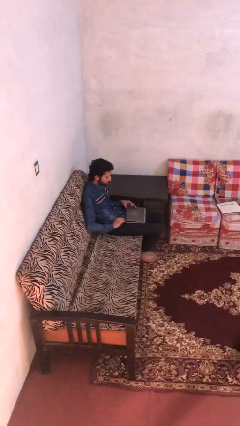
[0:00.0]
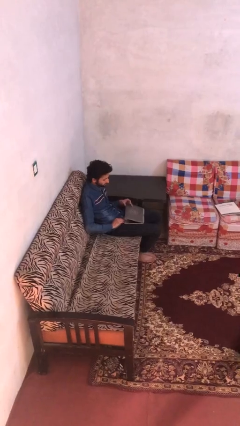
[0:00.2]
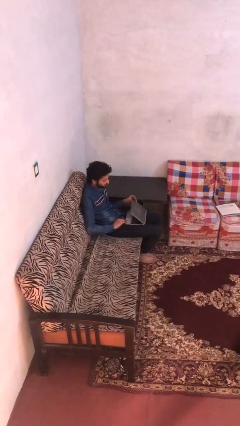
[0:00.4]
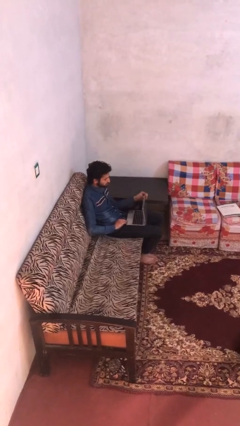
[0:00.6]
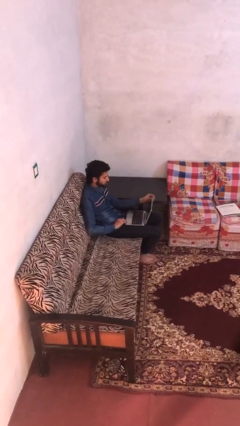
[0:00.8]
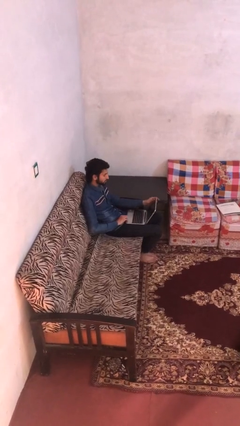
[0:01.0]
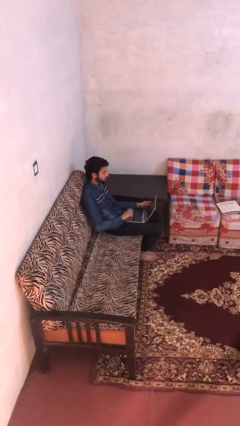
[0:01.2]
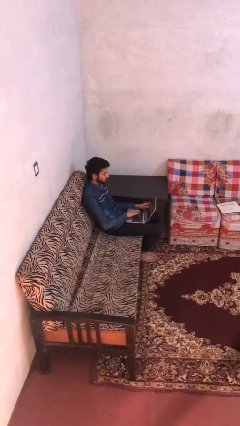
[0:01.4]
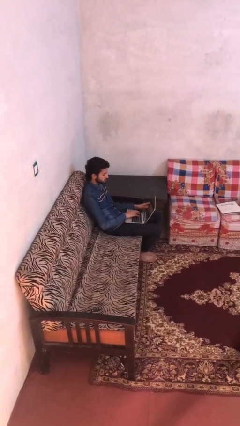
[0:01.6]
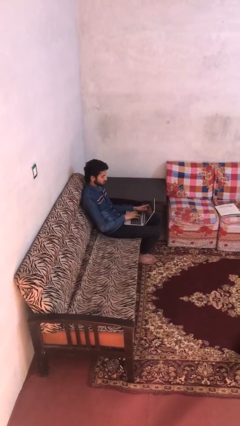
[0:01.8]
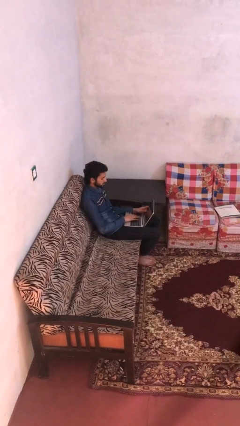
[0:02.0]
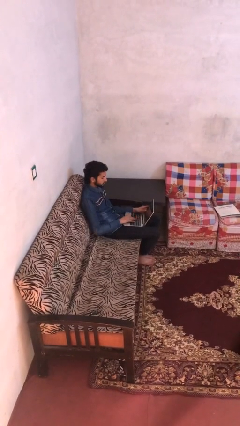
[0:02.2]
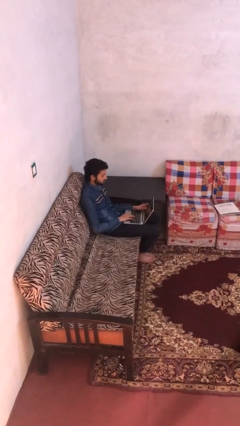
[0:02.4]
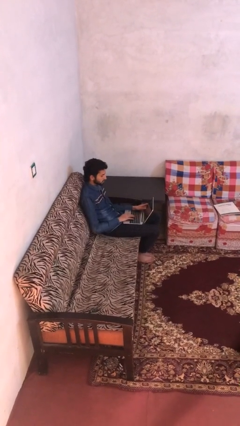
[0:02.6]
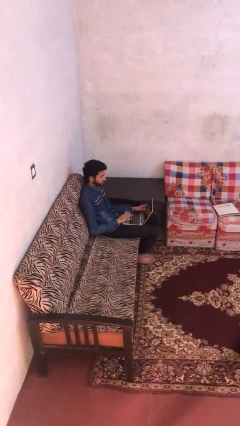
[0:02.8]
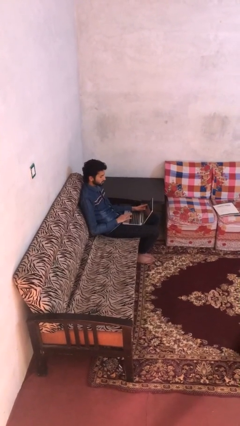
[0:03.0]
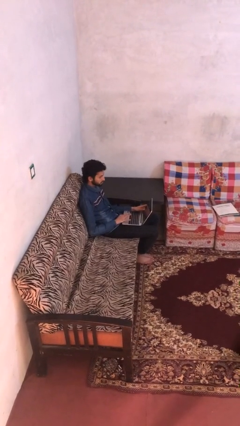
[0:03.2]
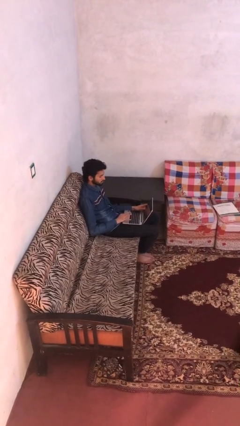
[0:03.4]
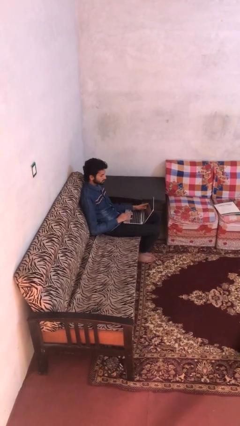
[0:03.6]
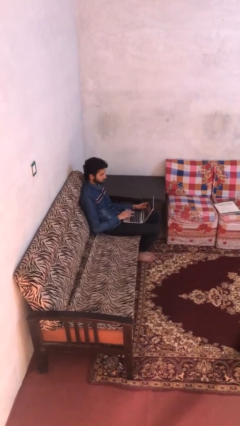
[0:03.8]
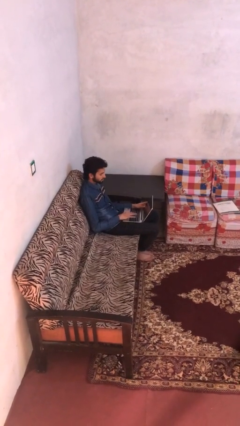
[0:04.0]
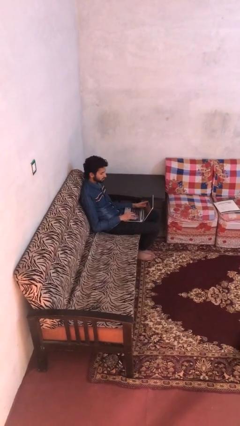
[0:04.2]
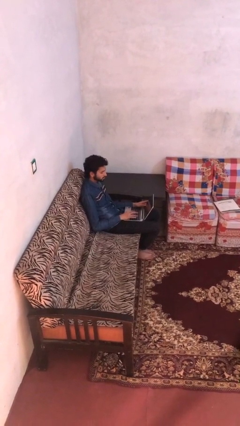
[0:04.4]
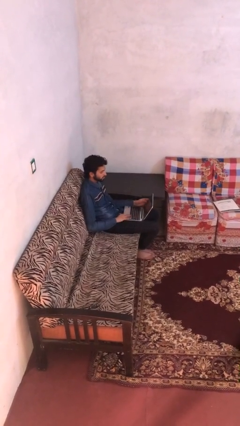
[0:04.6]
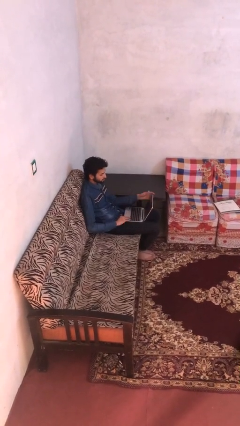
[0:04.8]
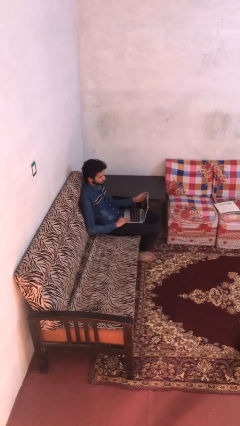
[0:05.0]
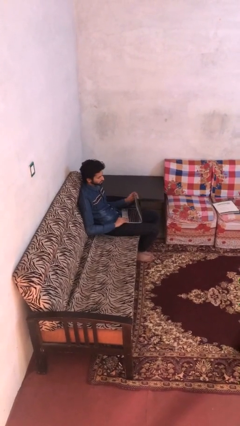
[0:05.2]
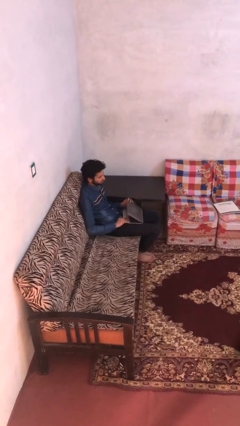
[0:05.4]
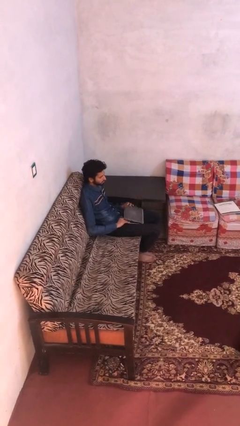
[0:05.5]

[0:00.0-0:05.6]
person interacts with laptop

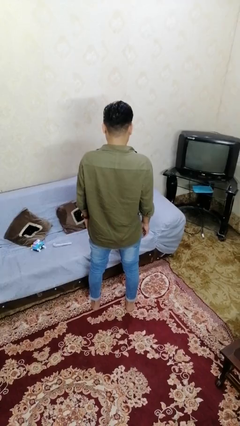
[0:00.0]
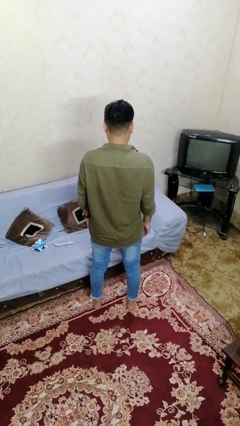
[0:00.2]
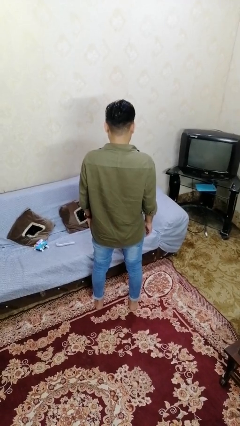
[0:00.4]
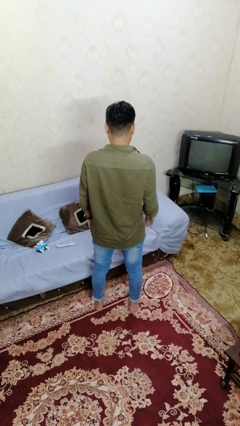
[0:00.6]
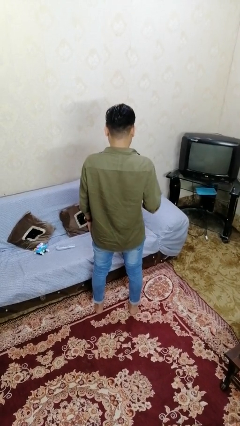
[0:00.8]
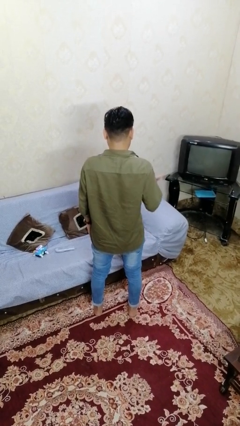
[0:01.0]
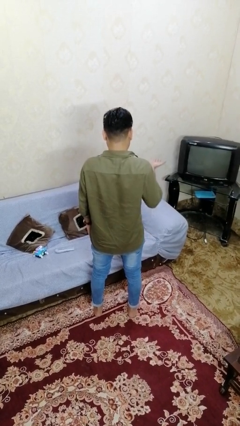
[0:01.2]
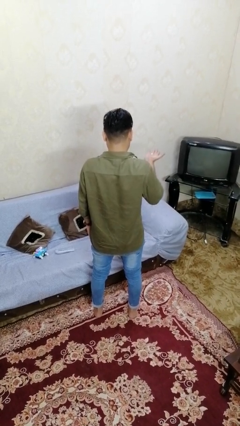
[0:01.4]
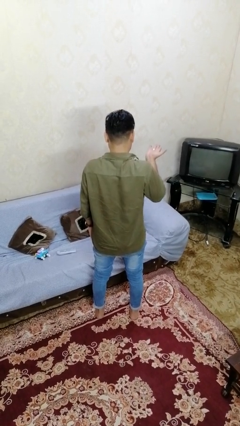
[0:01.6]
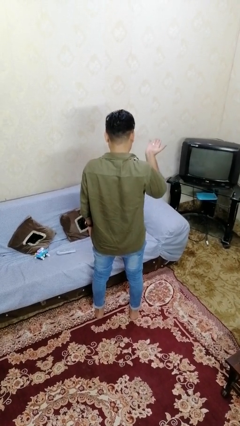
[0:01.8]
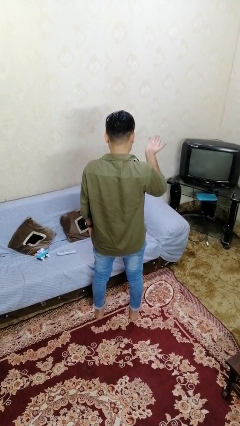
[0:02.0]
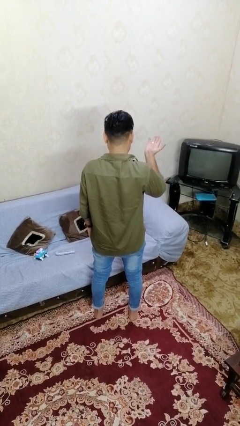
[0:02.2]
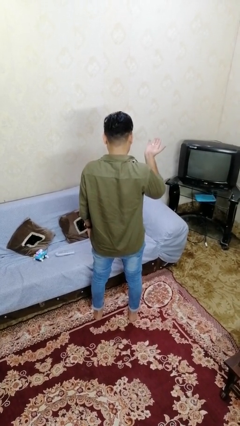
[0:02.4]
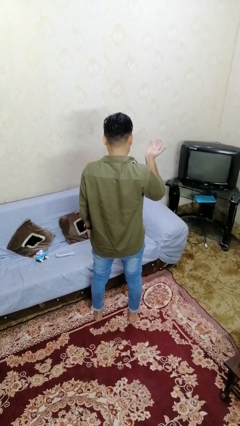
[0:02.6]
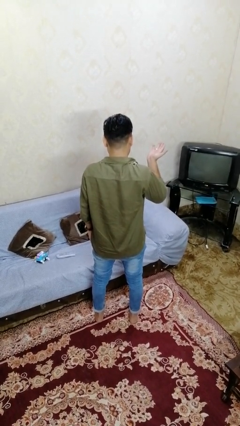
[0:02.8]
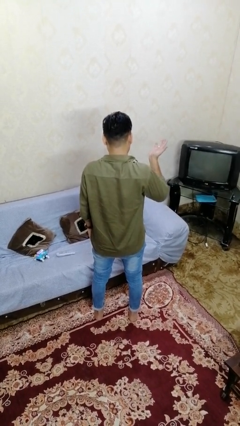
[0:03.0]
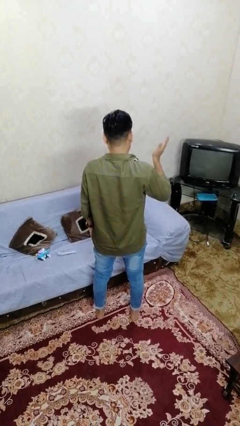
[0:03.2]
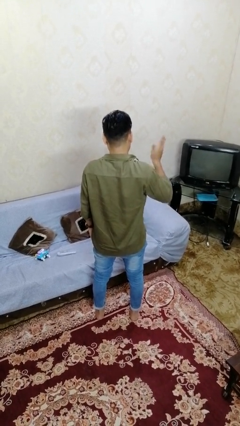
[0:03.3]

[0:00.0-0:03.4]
person gestures swipe up

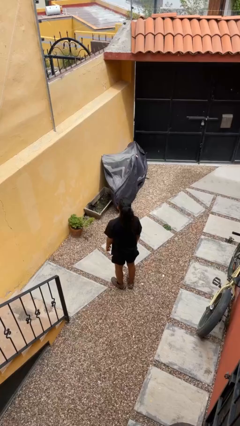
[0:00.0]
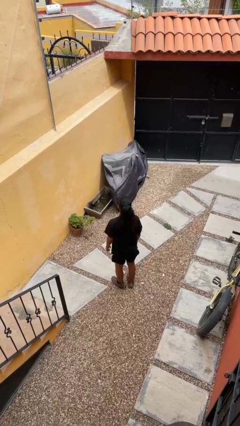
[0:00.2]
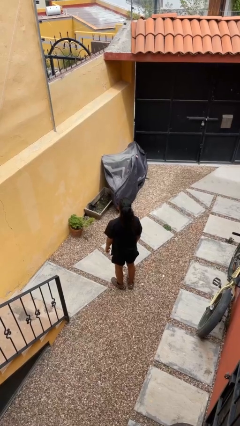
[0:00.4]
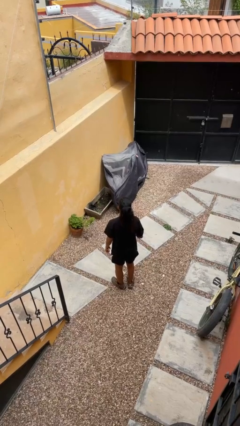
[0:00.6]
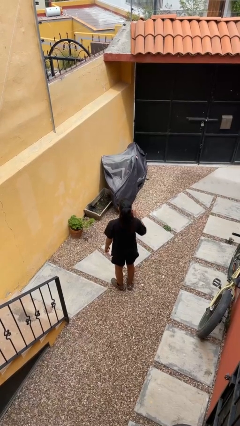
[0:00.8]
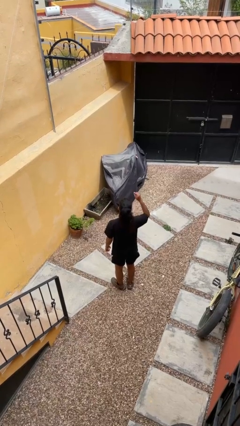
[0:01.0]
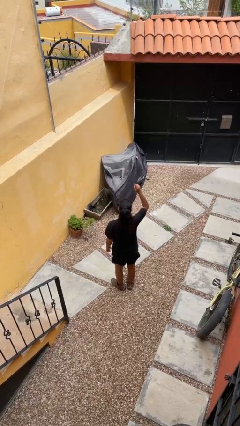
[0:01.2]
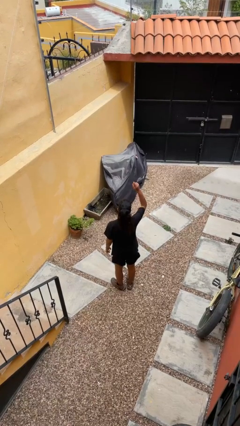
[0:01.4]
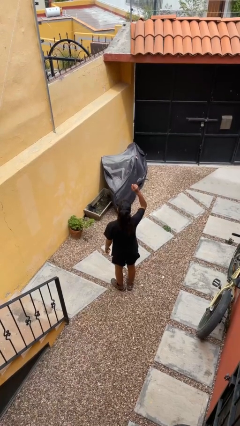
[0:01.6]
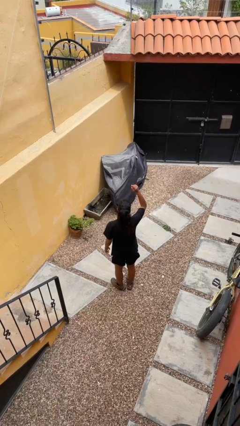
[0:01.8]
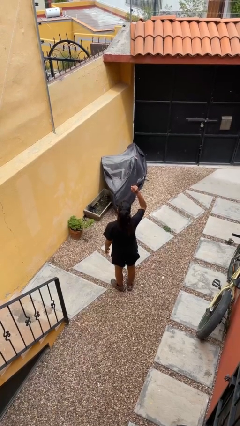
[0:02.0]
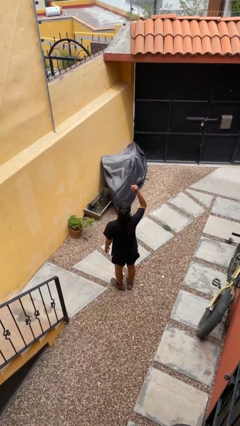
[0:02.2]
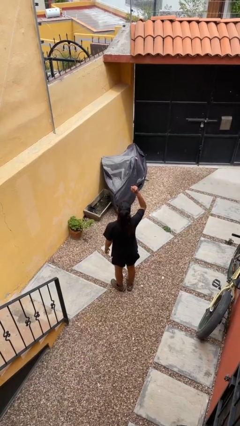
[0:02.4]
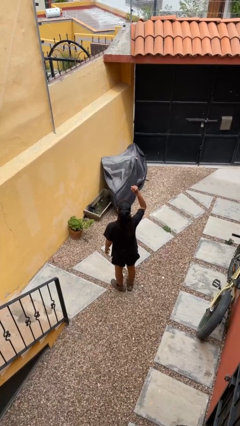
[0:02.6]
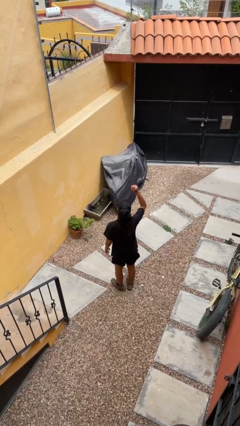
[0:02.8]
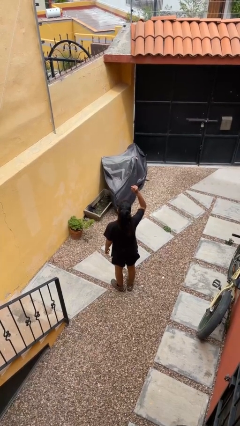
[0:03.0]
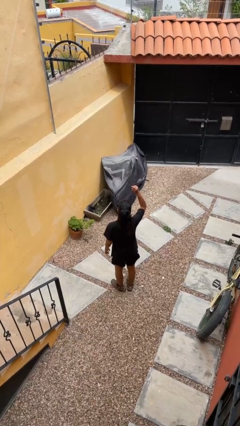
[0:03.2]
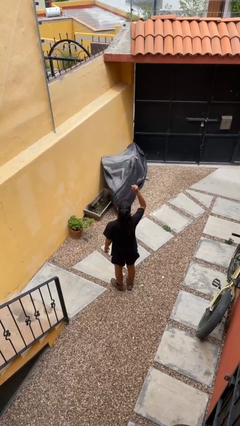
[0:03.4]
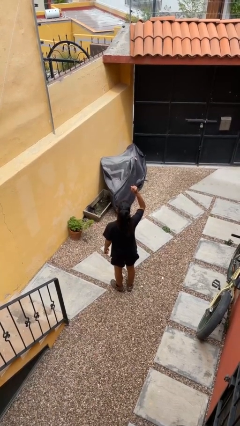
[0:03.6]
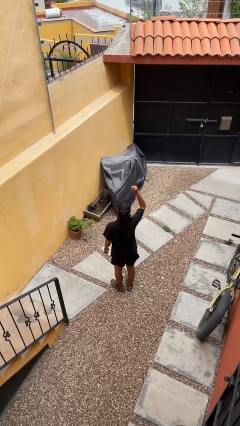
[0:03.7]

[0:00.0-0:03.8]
person gestures raise hand

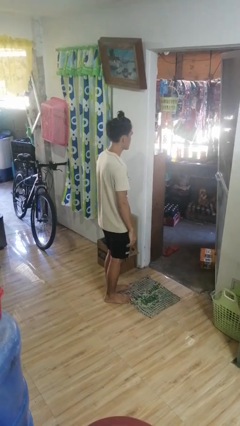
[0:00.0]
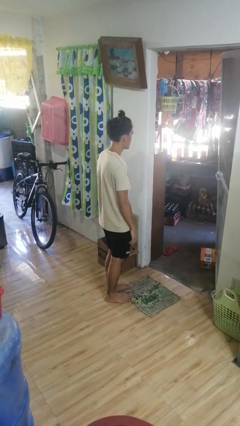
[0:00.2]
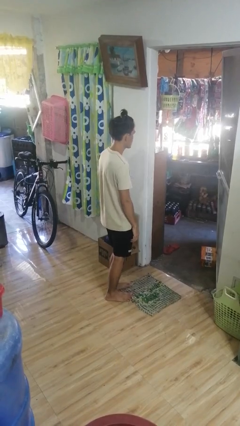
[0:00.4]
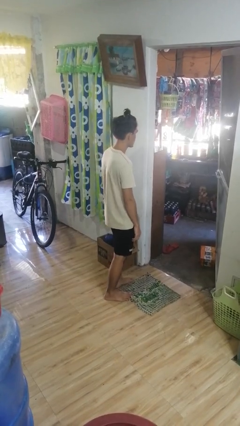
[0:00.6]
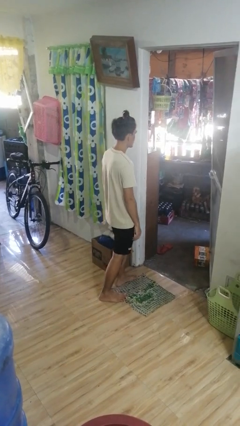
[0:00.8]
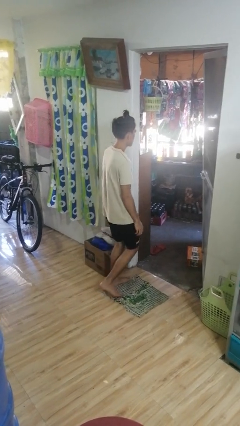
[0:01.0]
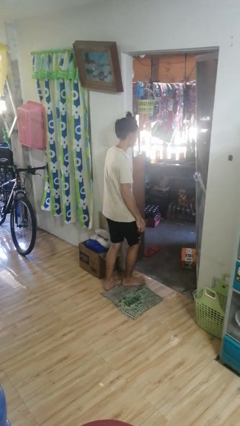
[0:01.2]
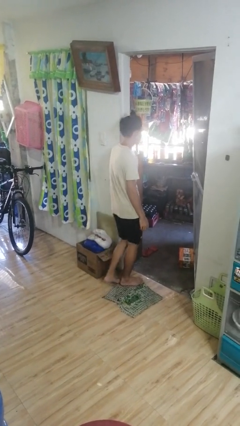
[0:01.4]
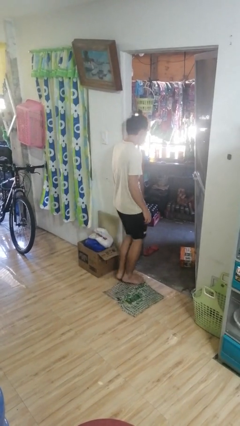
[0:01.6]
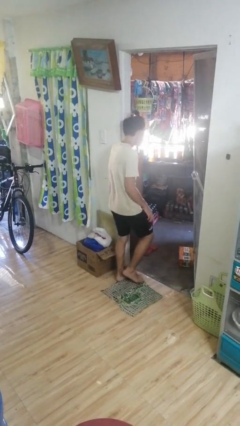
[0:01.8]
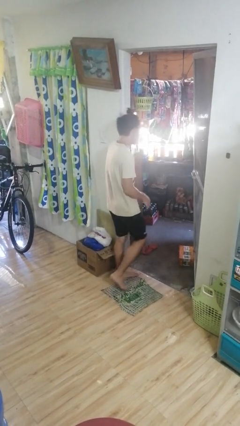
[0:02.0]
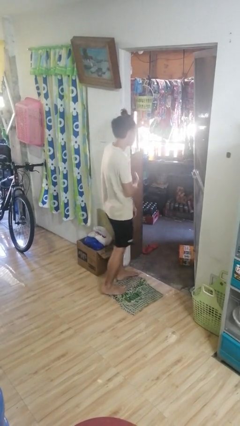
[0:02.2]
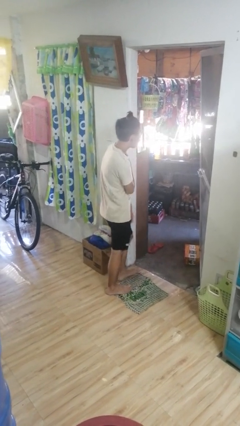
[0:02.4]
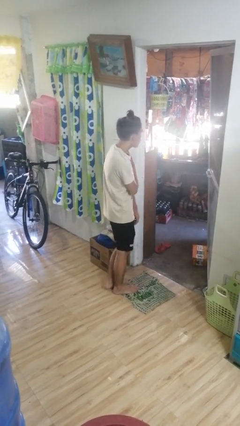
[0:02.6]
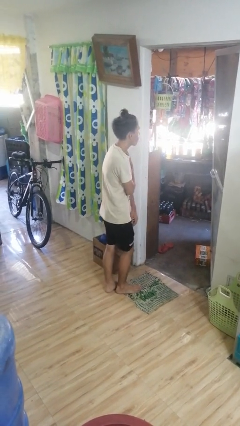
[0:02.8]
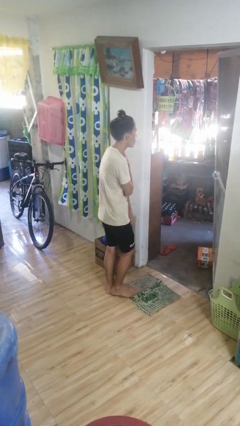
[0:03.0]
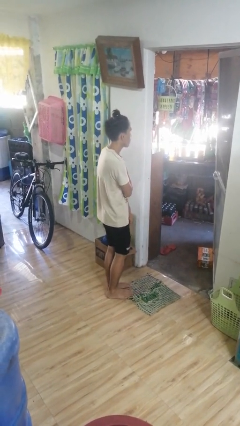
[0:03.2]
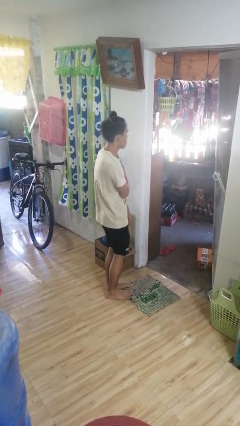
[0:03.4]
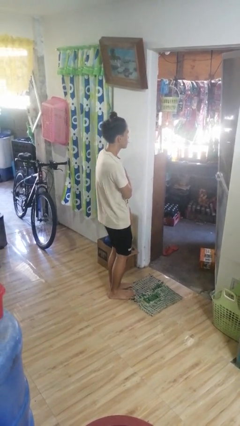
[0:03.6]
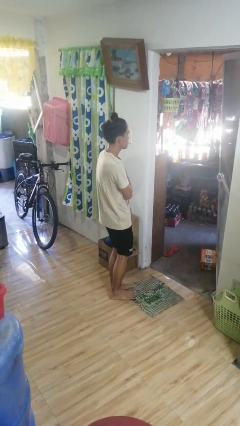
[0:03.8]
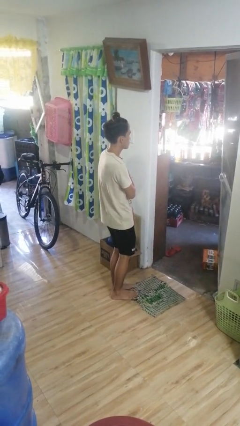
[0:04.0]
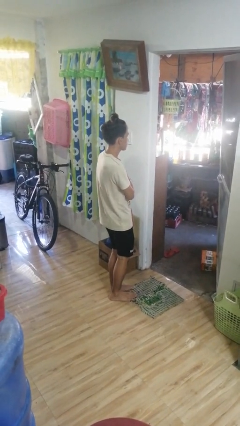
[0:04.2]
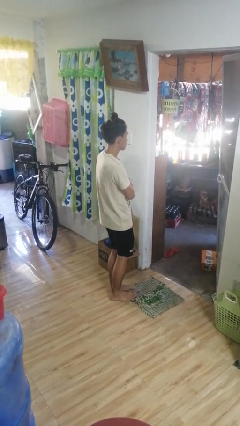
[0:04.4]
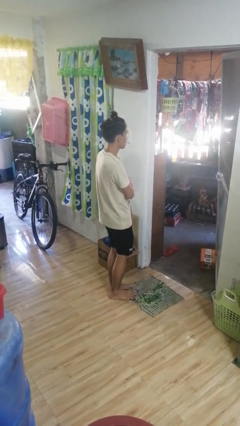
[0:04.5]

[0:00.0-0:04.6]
person bumps into wall
